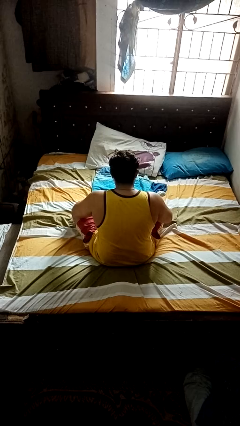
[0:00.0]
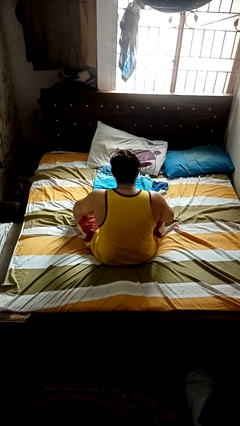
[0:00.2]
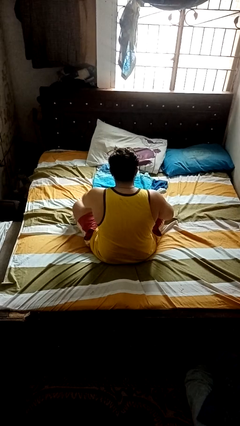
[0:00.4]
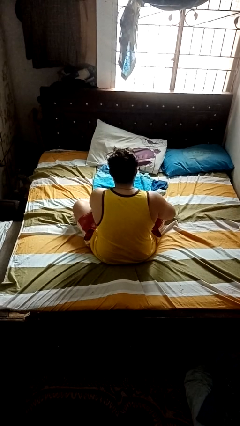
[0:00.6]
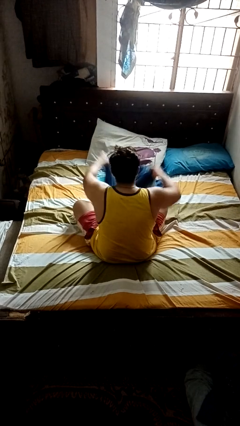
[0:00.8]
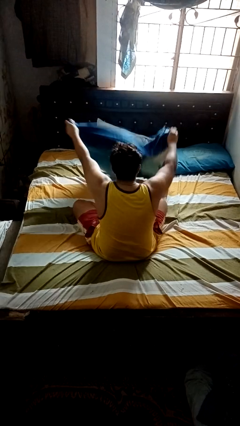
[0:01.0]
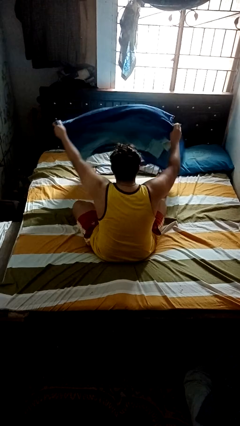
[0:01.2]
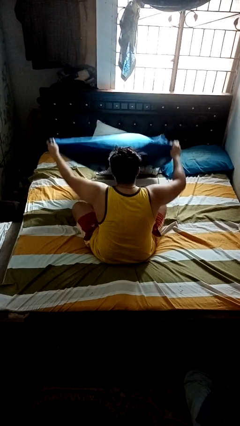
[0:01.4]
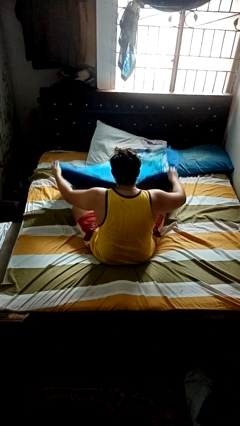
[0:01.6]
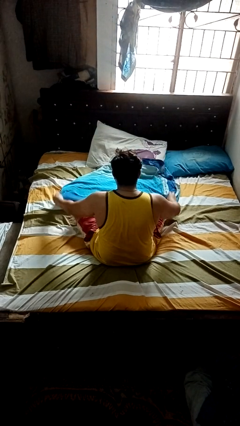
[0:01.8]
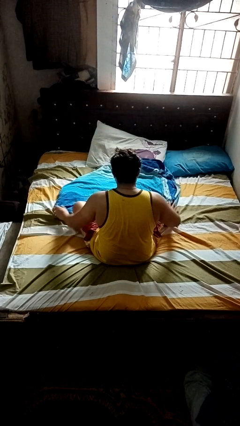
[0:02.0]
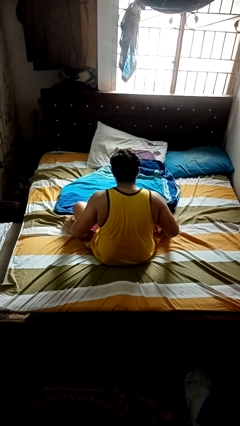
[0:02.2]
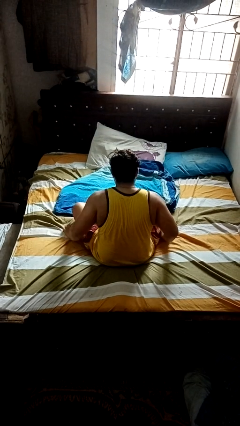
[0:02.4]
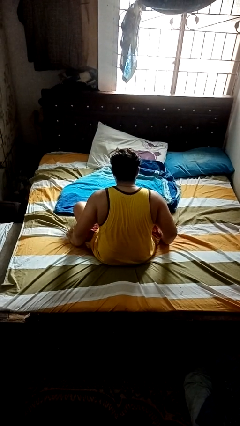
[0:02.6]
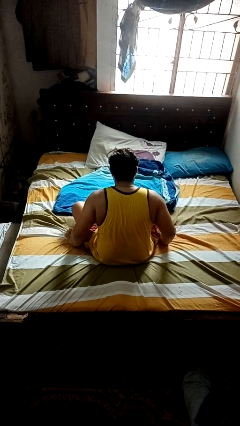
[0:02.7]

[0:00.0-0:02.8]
person unfolds blanket

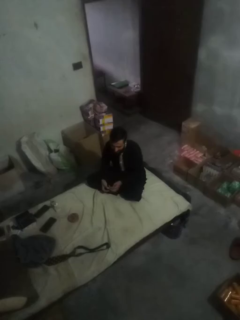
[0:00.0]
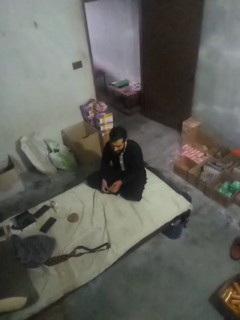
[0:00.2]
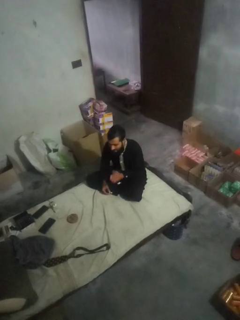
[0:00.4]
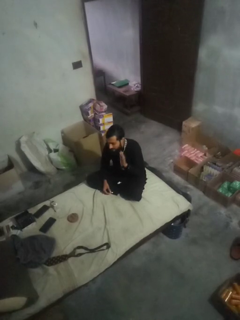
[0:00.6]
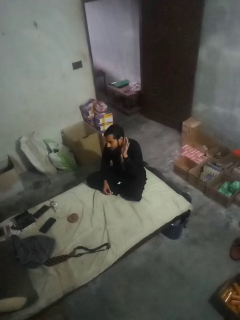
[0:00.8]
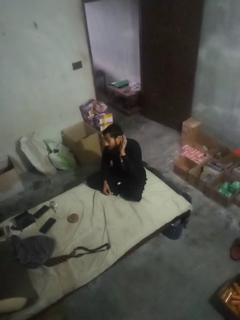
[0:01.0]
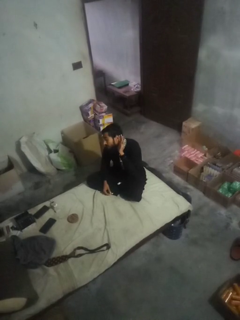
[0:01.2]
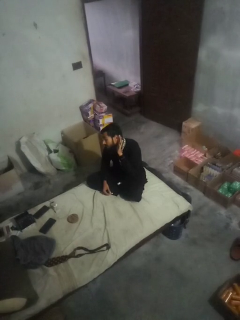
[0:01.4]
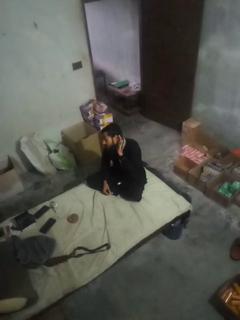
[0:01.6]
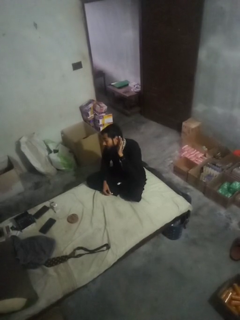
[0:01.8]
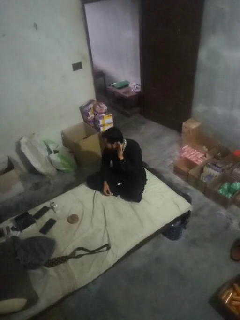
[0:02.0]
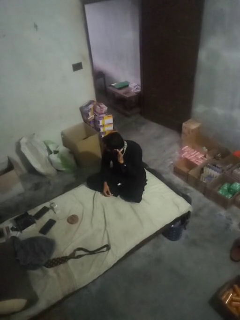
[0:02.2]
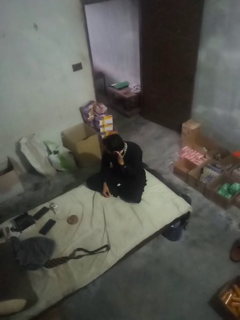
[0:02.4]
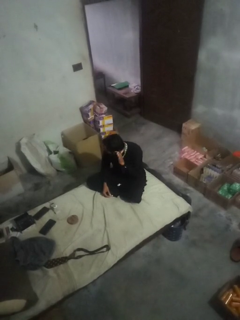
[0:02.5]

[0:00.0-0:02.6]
person gestures listen closely

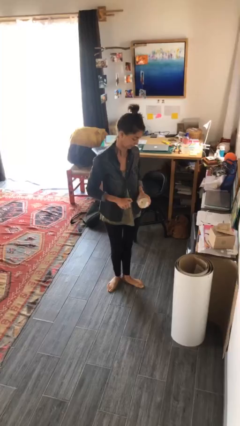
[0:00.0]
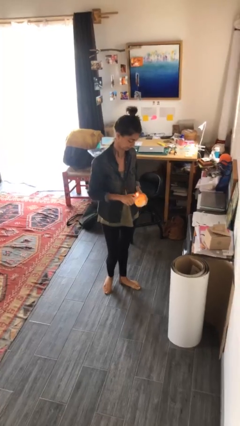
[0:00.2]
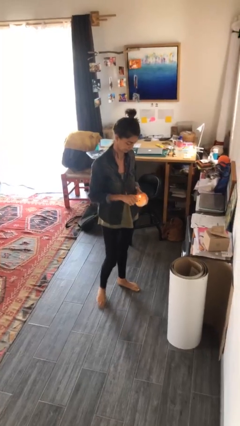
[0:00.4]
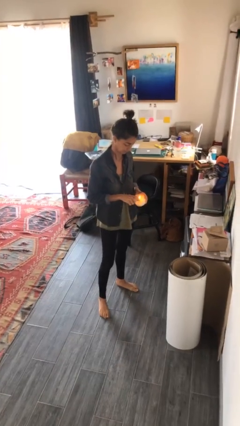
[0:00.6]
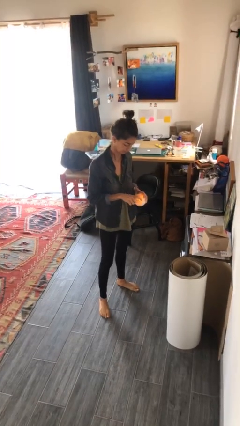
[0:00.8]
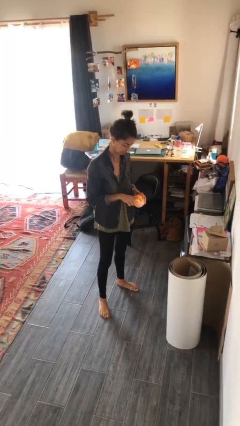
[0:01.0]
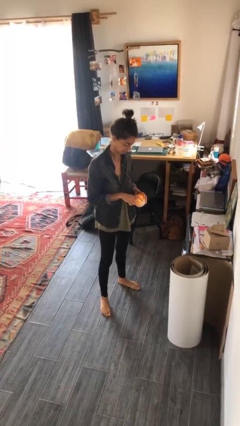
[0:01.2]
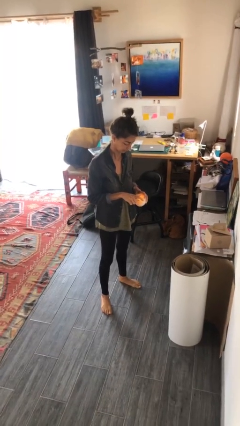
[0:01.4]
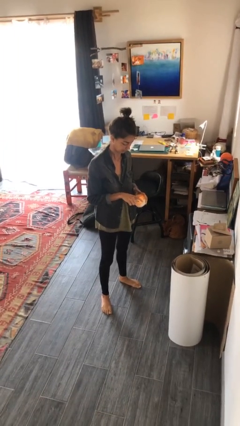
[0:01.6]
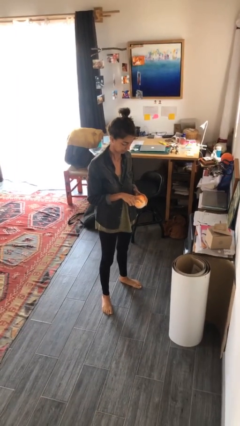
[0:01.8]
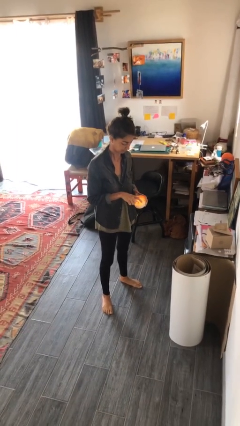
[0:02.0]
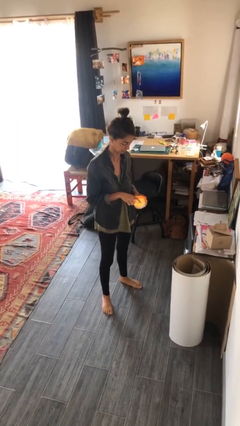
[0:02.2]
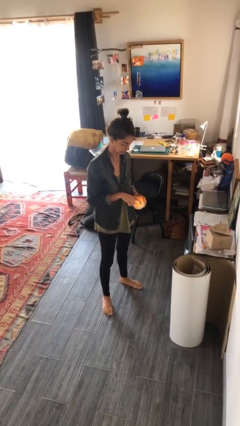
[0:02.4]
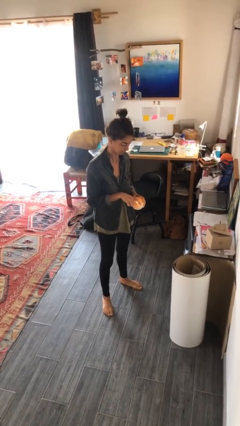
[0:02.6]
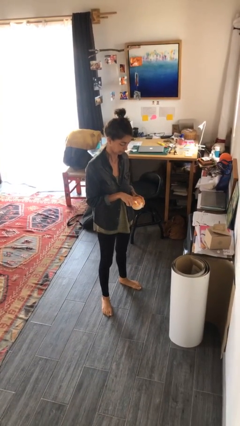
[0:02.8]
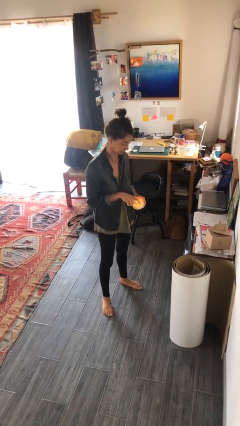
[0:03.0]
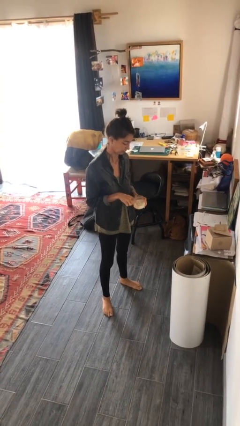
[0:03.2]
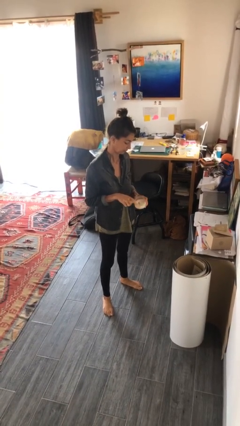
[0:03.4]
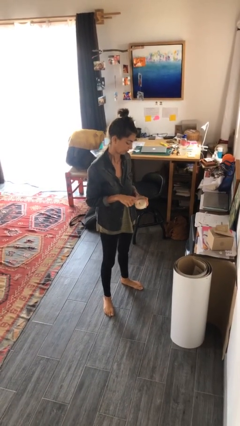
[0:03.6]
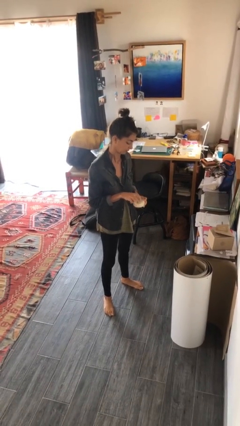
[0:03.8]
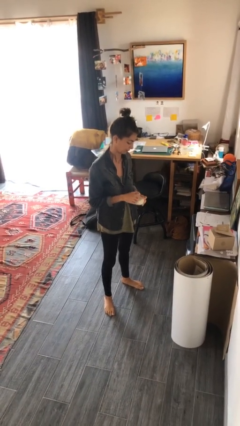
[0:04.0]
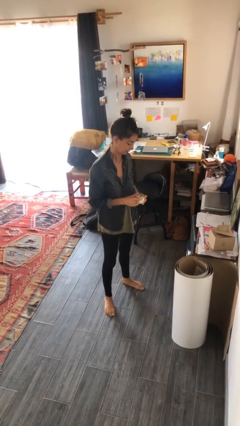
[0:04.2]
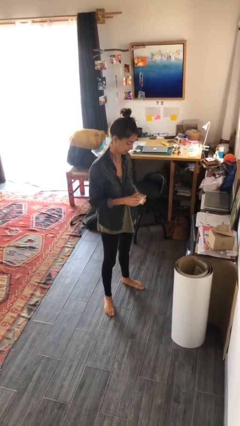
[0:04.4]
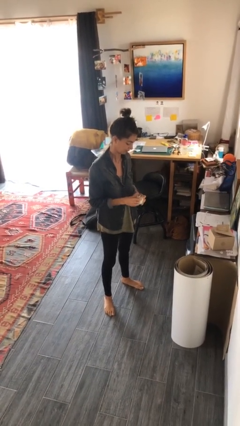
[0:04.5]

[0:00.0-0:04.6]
person lights candle

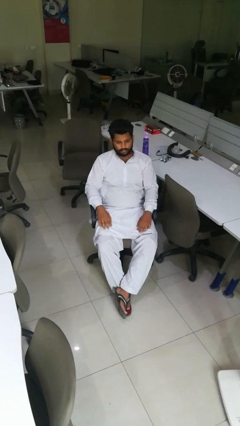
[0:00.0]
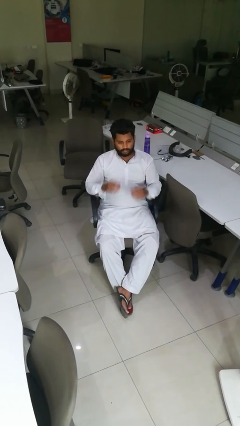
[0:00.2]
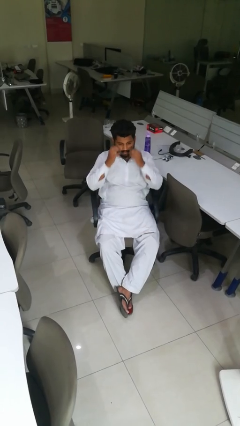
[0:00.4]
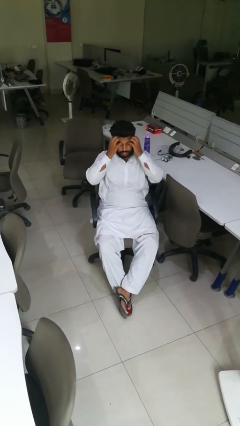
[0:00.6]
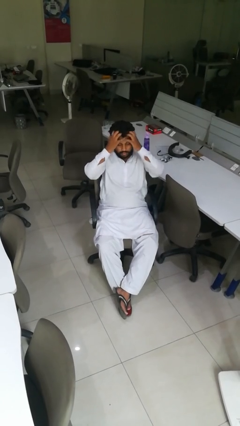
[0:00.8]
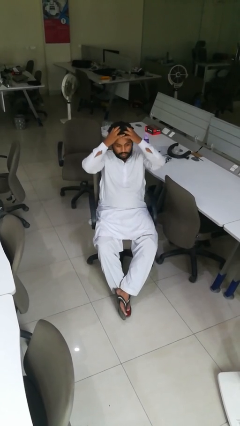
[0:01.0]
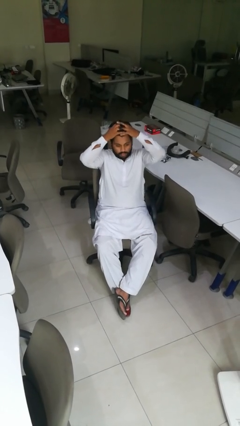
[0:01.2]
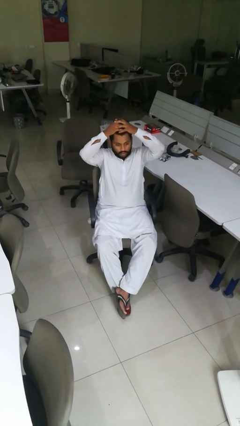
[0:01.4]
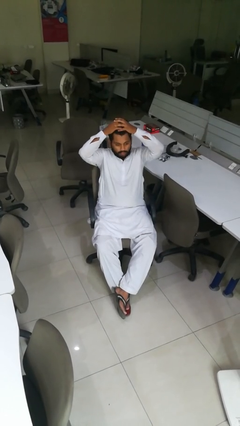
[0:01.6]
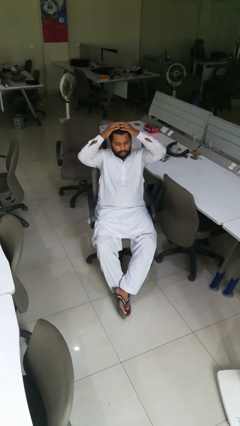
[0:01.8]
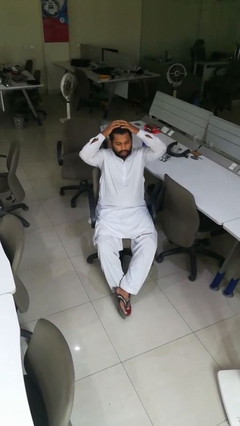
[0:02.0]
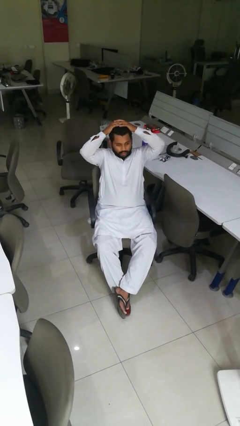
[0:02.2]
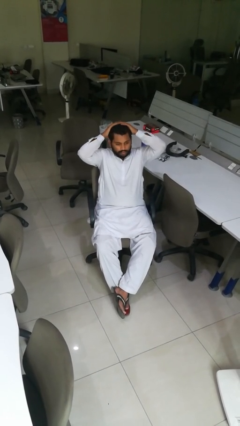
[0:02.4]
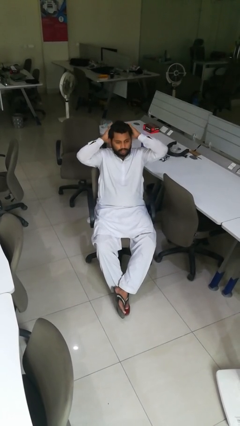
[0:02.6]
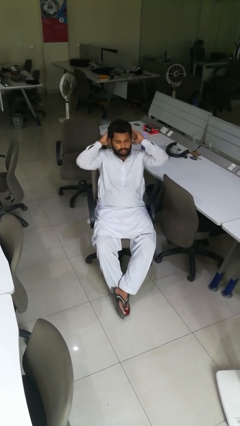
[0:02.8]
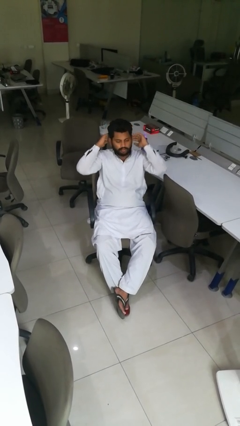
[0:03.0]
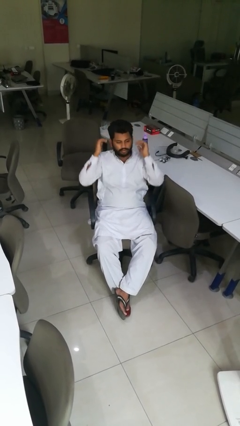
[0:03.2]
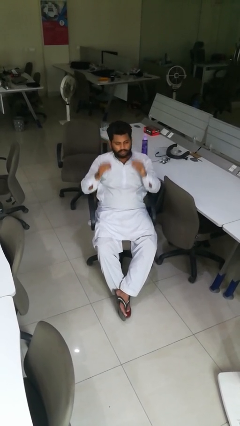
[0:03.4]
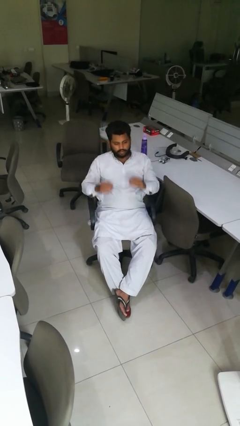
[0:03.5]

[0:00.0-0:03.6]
person strokes hair

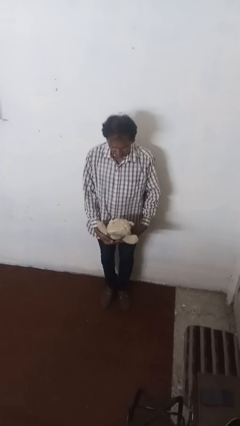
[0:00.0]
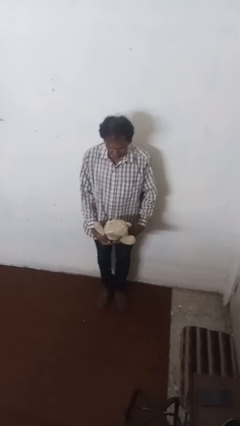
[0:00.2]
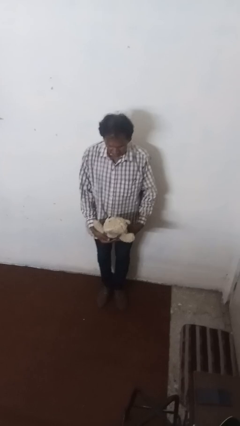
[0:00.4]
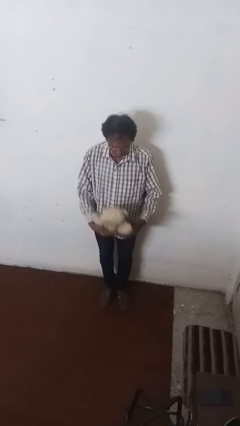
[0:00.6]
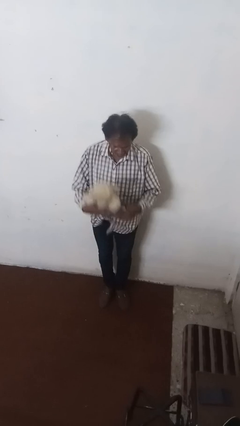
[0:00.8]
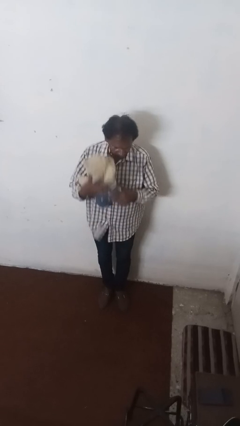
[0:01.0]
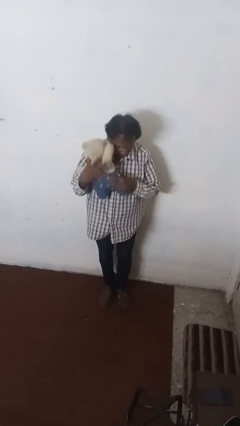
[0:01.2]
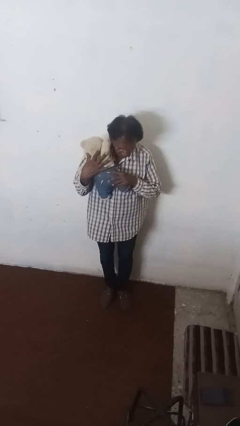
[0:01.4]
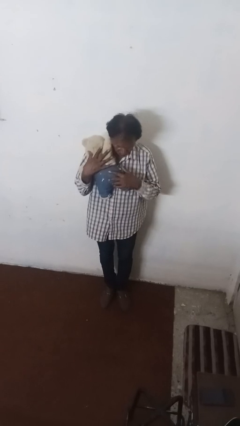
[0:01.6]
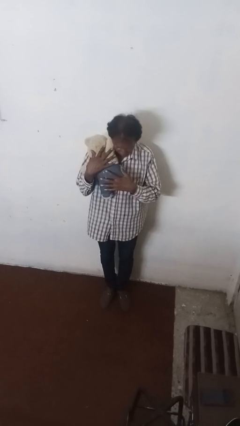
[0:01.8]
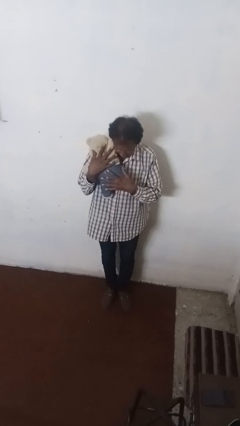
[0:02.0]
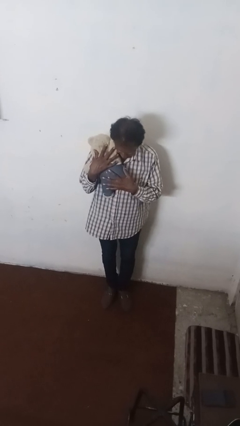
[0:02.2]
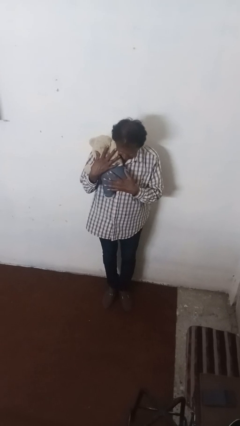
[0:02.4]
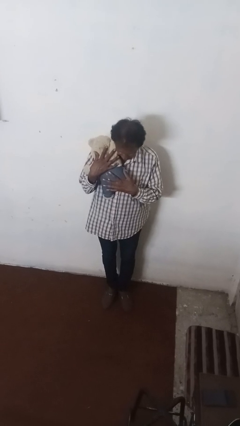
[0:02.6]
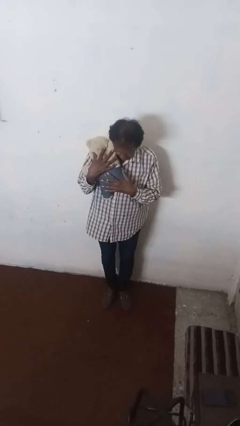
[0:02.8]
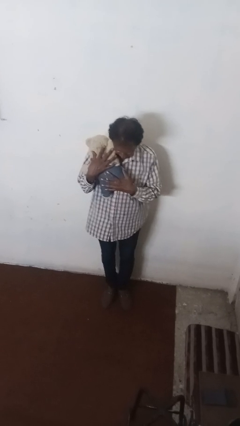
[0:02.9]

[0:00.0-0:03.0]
person hugs stuffed animal

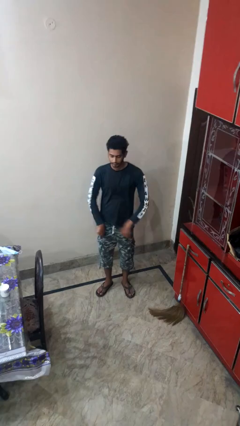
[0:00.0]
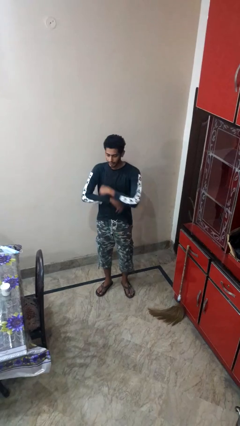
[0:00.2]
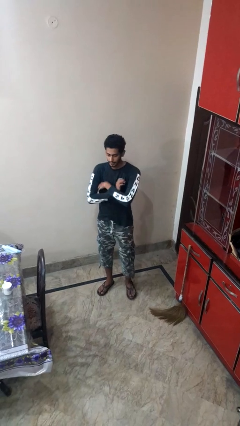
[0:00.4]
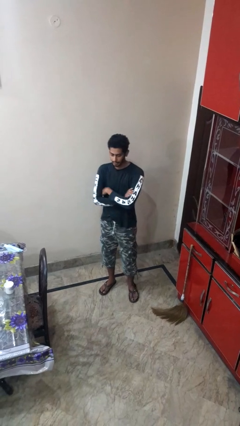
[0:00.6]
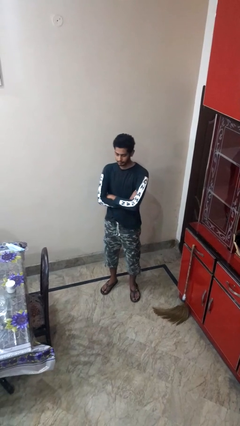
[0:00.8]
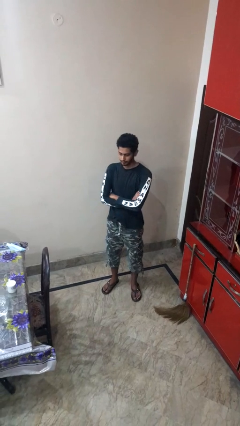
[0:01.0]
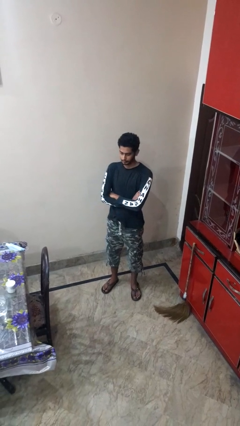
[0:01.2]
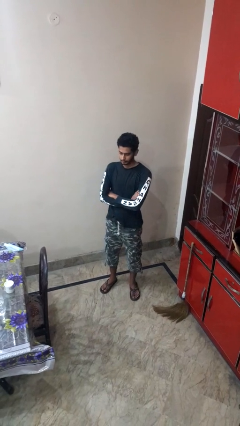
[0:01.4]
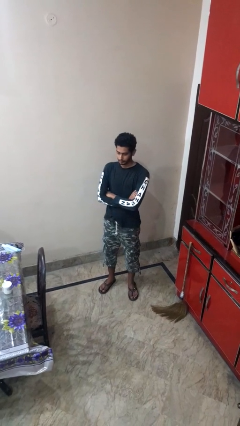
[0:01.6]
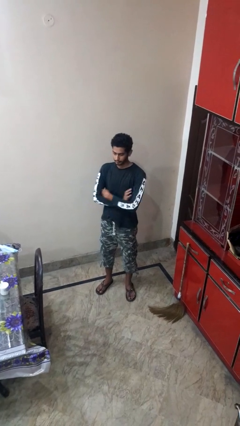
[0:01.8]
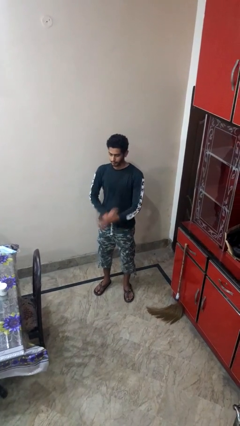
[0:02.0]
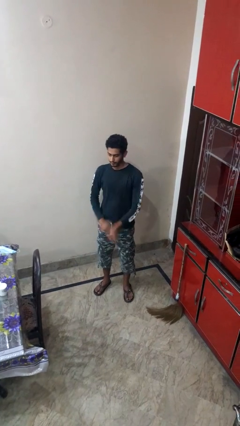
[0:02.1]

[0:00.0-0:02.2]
person crosses arms
